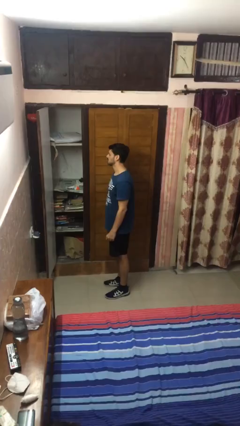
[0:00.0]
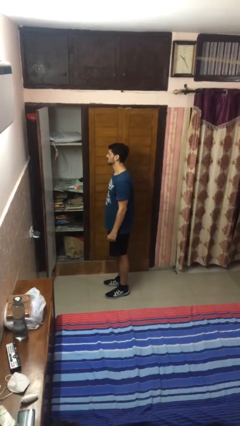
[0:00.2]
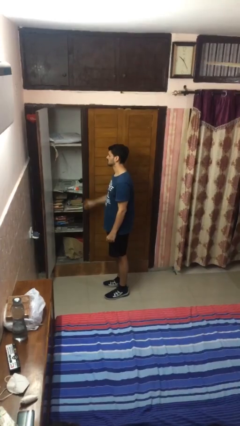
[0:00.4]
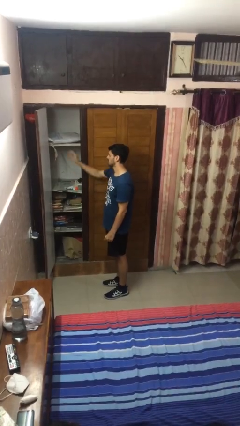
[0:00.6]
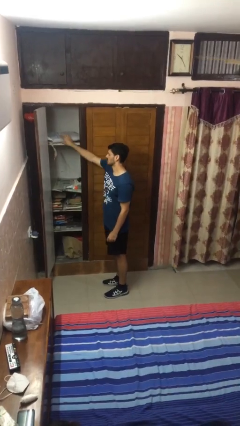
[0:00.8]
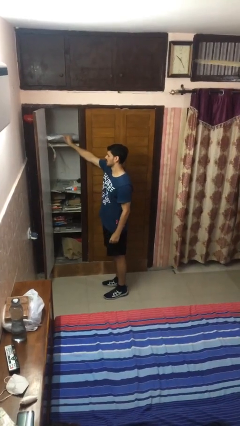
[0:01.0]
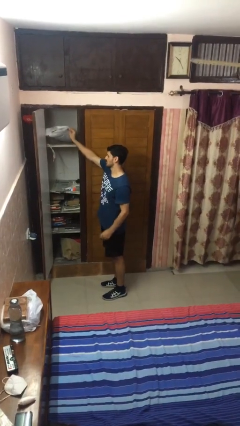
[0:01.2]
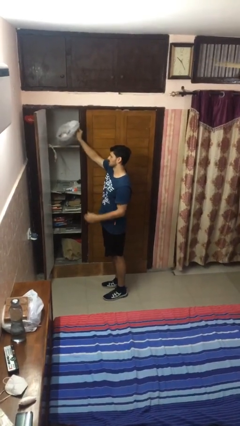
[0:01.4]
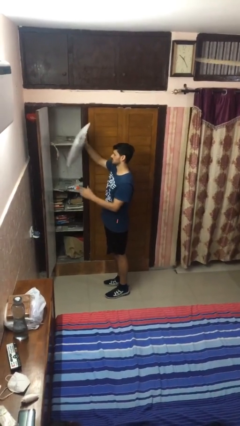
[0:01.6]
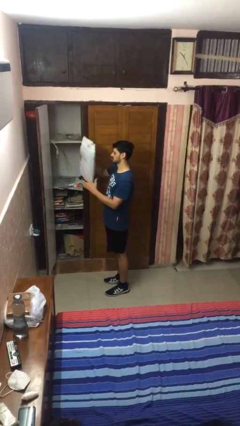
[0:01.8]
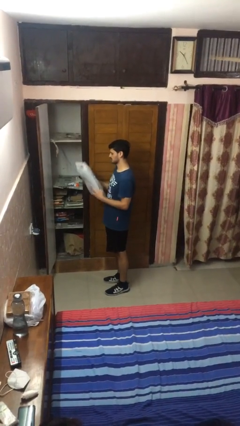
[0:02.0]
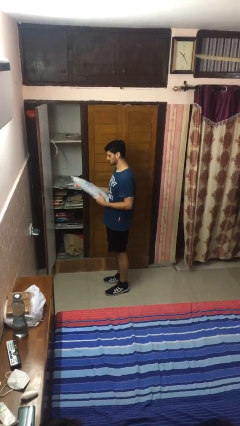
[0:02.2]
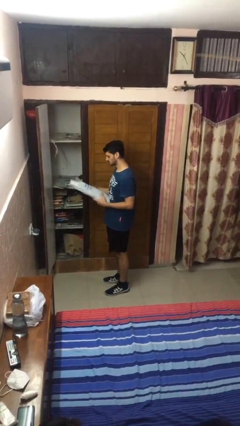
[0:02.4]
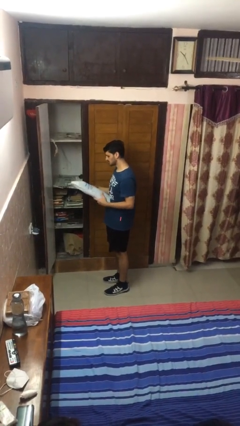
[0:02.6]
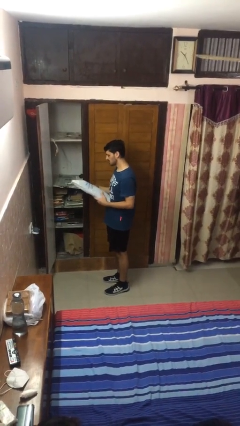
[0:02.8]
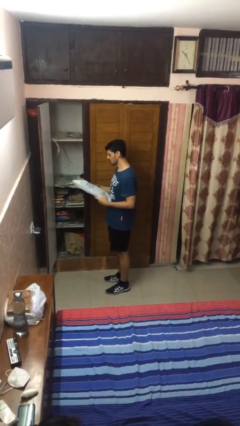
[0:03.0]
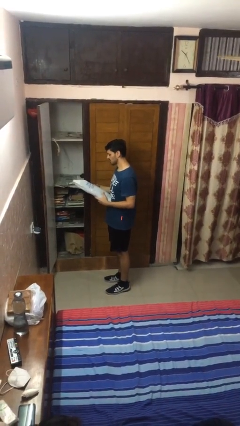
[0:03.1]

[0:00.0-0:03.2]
person picks up object from shelf

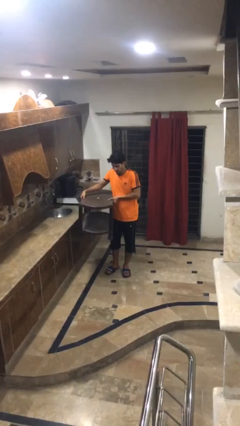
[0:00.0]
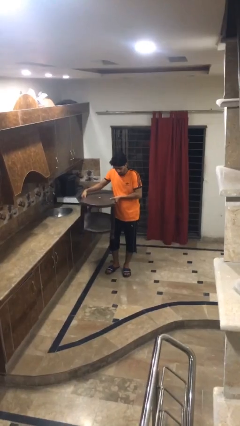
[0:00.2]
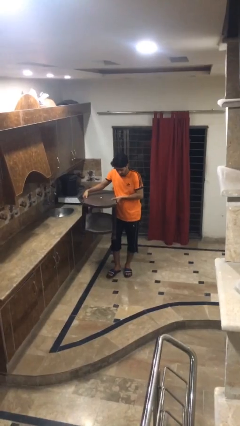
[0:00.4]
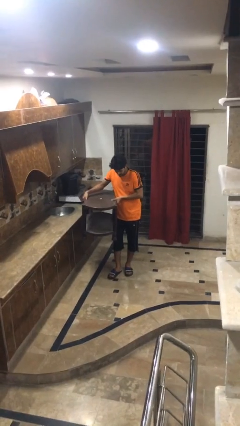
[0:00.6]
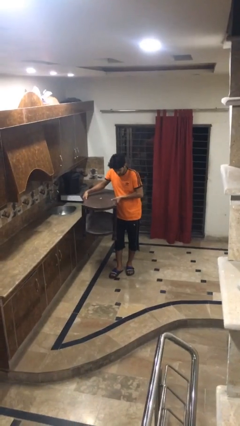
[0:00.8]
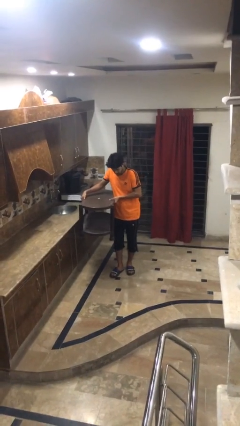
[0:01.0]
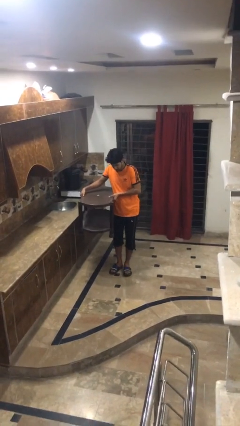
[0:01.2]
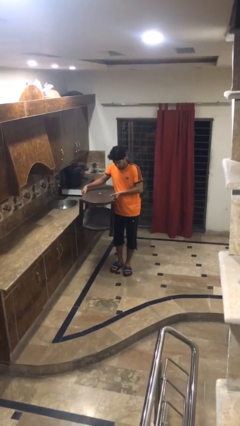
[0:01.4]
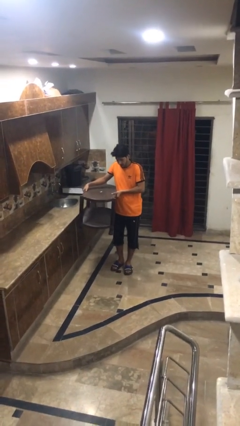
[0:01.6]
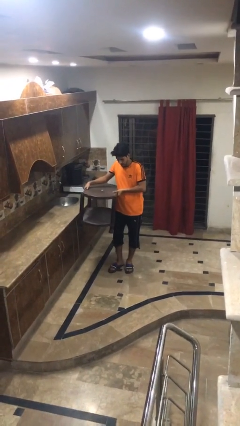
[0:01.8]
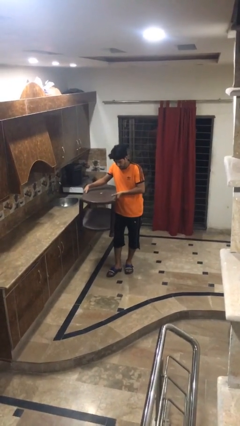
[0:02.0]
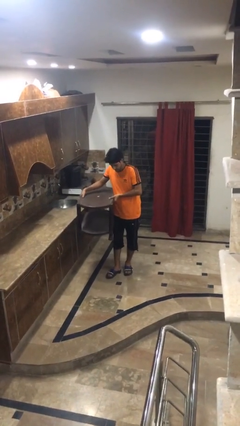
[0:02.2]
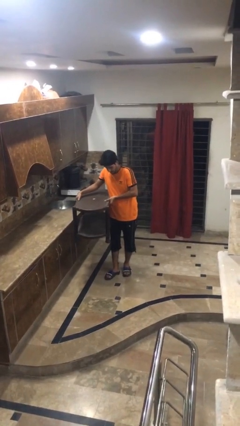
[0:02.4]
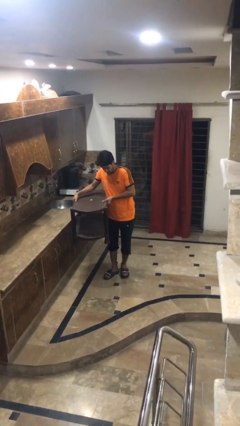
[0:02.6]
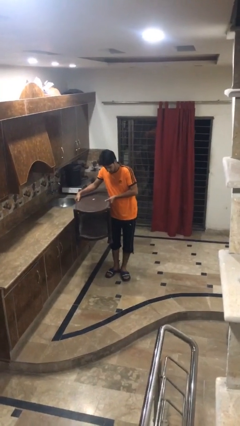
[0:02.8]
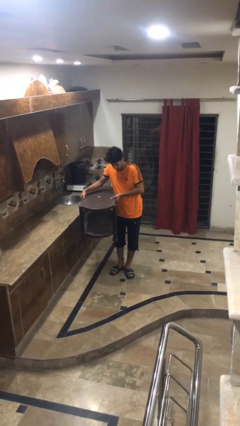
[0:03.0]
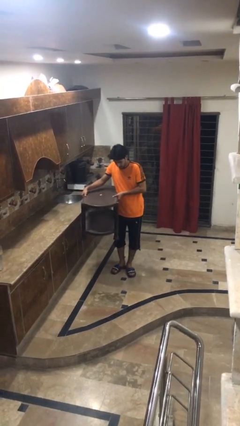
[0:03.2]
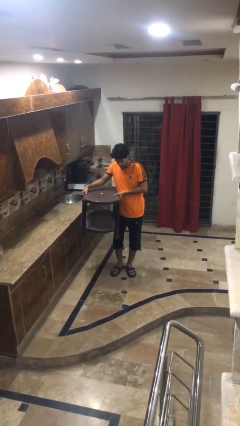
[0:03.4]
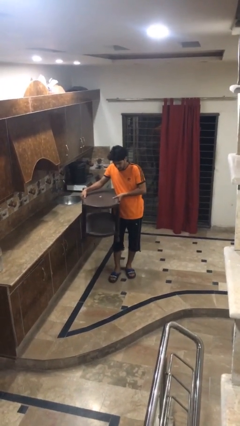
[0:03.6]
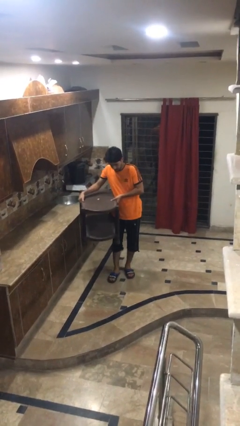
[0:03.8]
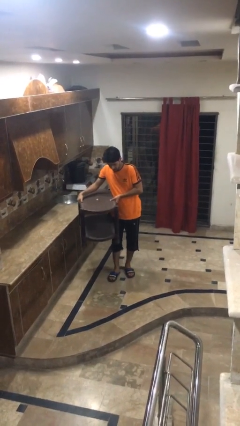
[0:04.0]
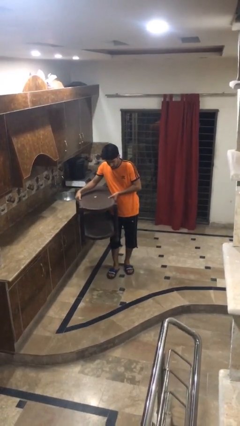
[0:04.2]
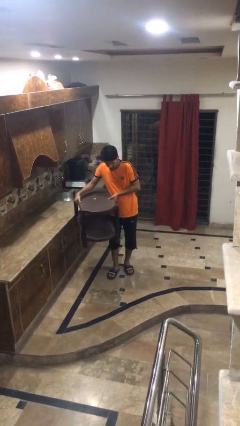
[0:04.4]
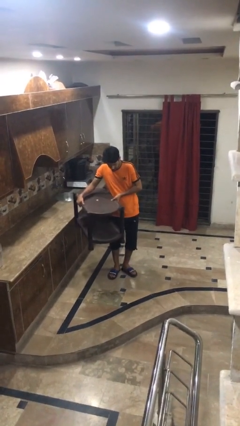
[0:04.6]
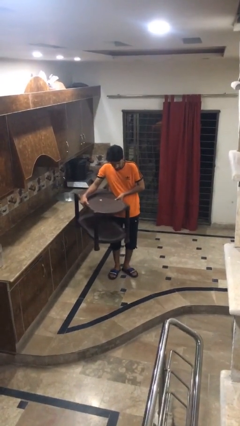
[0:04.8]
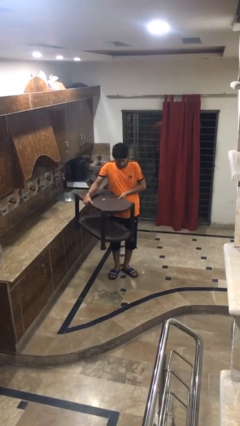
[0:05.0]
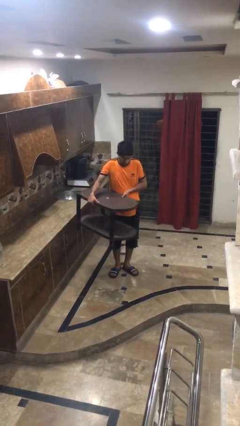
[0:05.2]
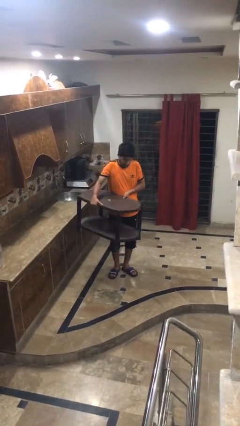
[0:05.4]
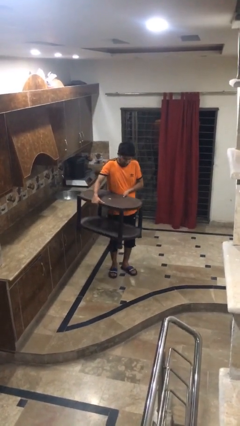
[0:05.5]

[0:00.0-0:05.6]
person carries furniture

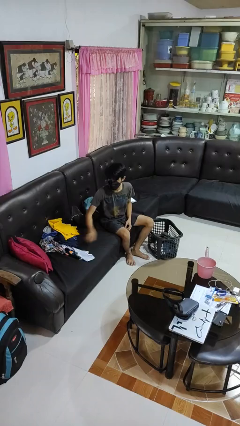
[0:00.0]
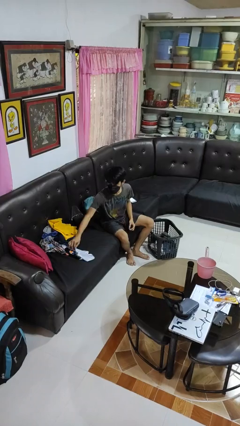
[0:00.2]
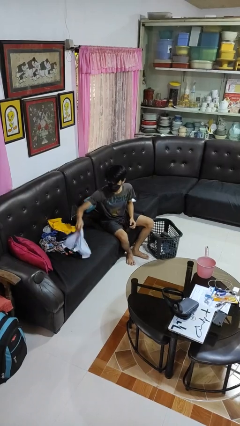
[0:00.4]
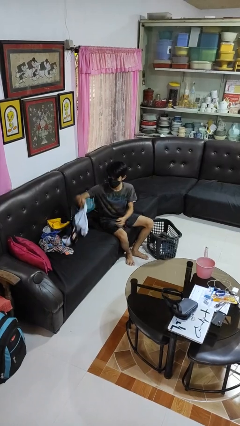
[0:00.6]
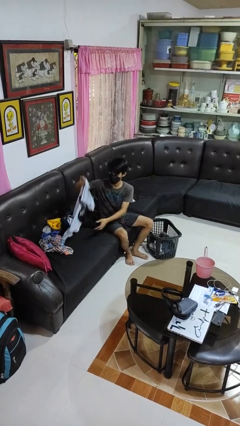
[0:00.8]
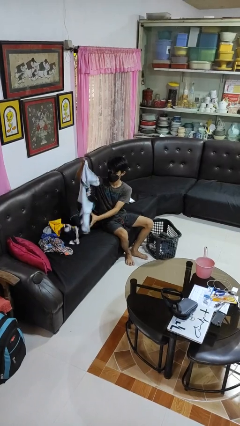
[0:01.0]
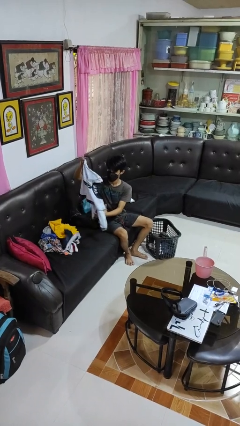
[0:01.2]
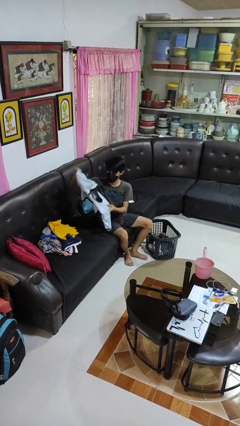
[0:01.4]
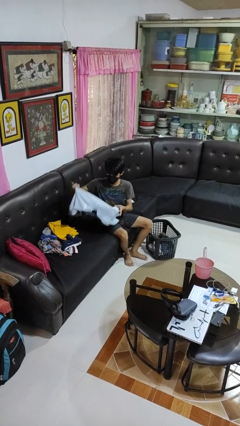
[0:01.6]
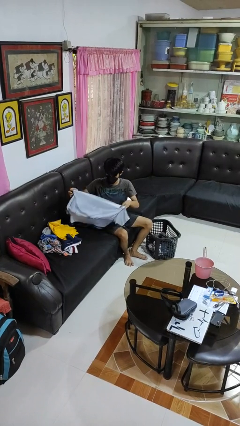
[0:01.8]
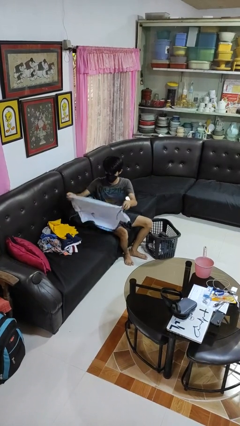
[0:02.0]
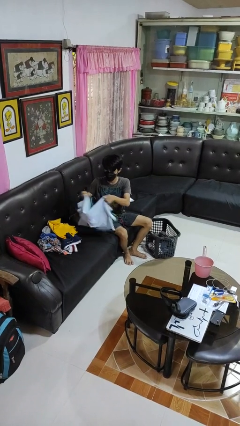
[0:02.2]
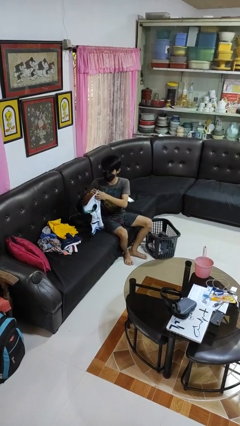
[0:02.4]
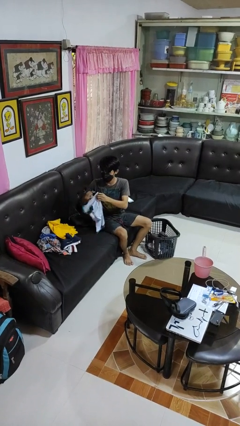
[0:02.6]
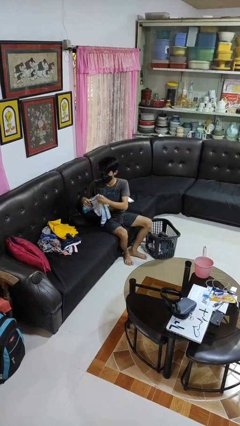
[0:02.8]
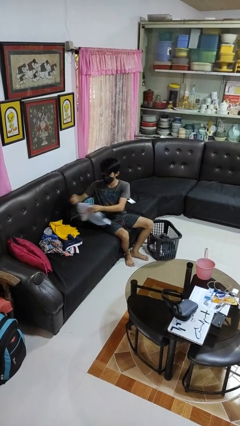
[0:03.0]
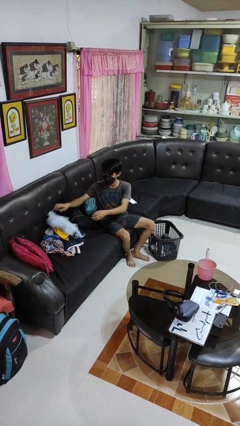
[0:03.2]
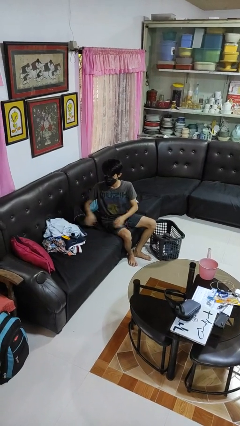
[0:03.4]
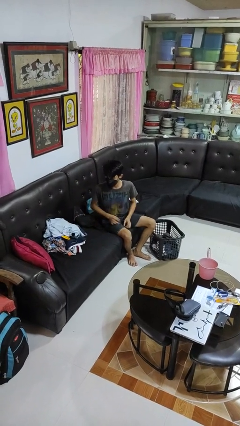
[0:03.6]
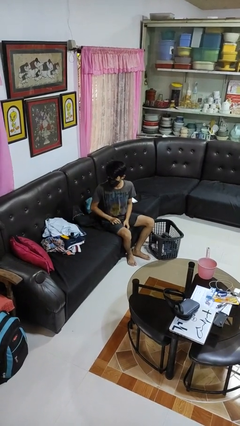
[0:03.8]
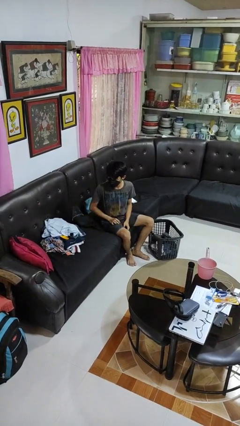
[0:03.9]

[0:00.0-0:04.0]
person folds shirt

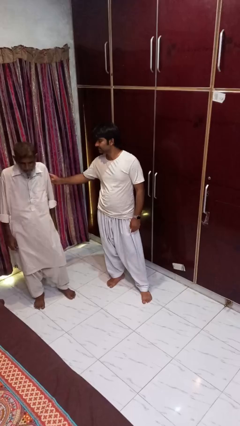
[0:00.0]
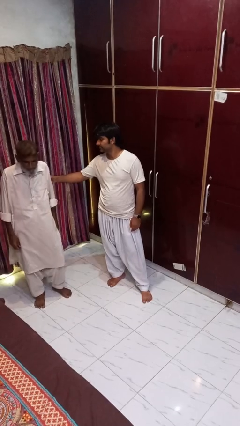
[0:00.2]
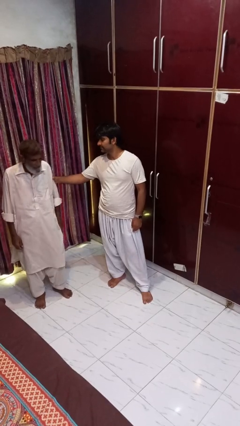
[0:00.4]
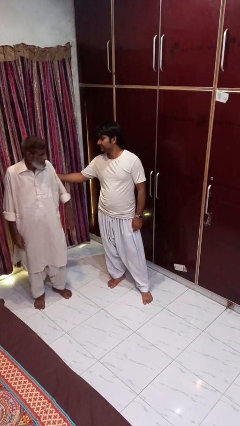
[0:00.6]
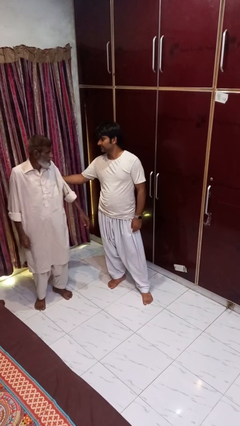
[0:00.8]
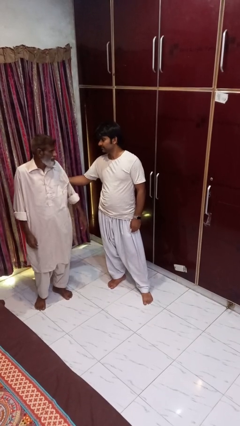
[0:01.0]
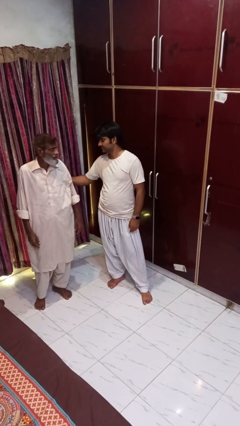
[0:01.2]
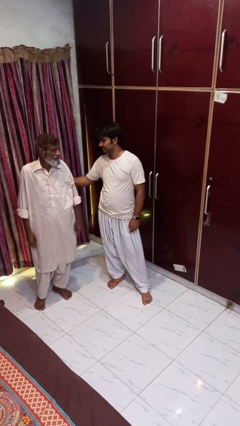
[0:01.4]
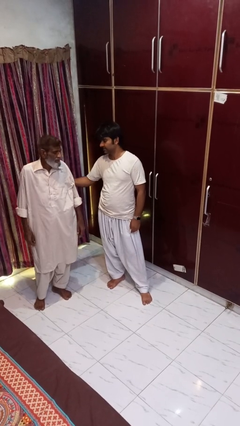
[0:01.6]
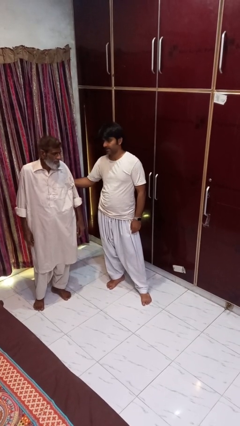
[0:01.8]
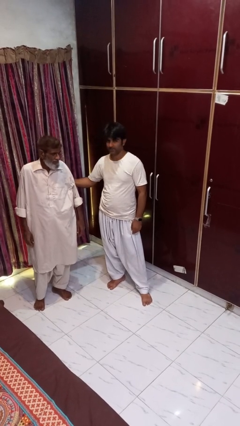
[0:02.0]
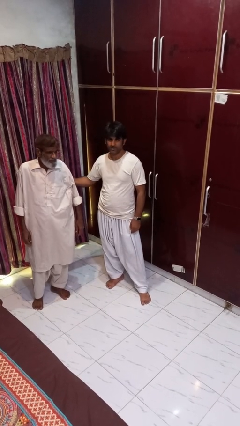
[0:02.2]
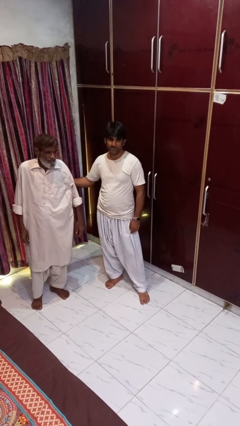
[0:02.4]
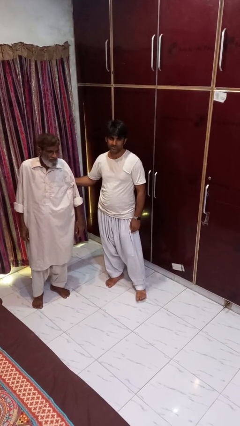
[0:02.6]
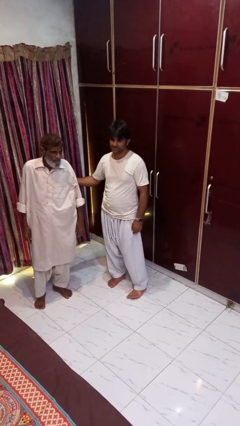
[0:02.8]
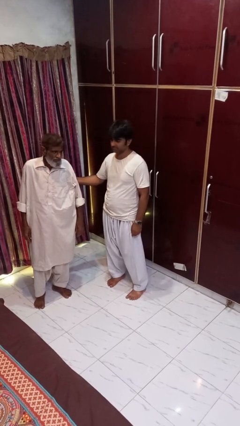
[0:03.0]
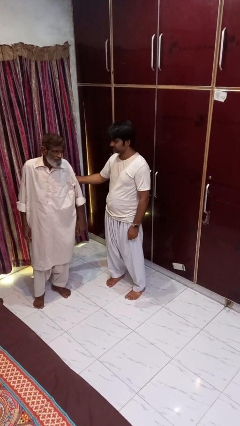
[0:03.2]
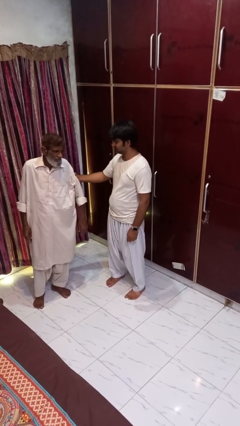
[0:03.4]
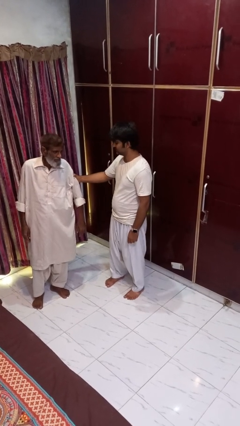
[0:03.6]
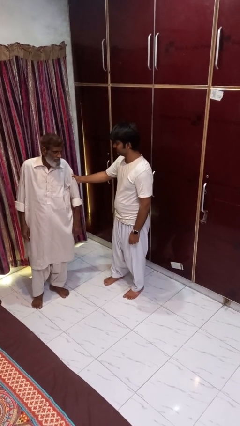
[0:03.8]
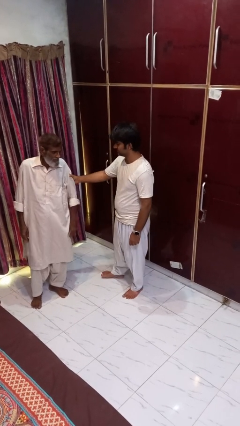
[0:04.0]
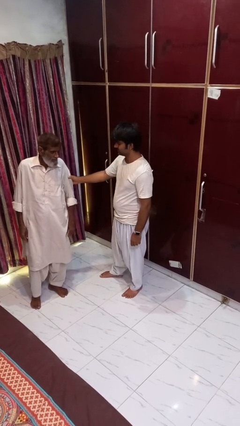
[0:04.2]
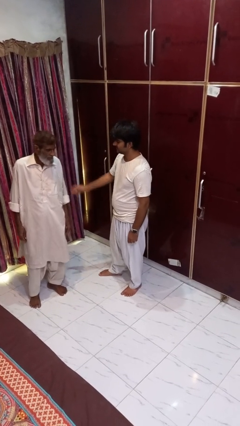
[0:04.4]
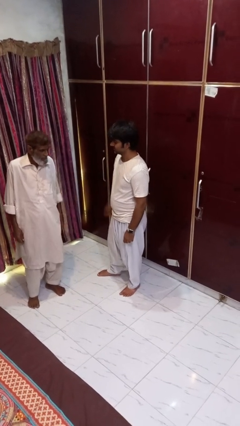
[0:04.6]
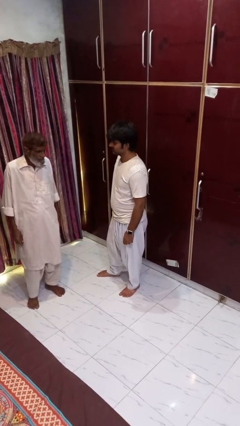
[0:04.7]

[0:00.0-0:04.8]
person grabs person by bicep

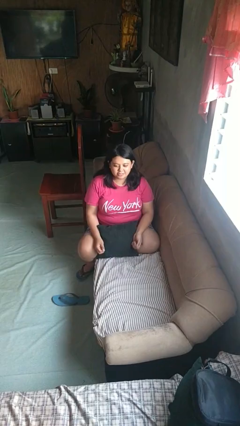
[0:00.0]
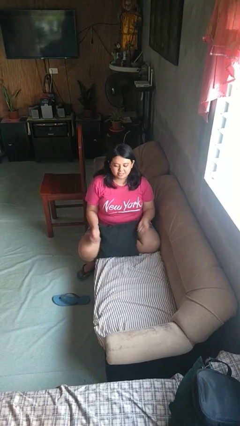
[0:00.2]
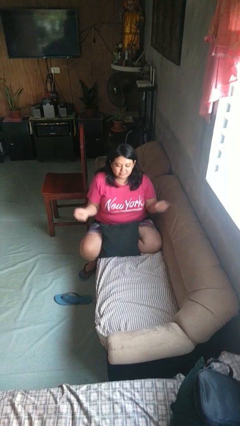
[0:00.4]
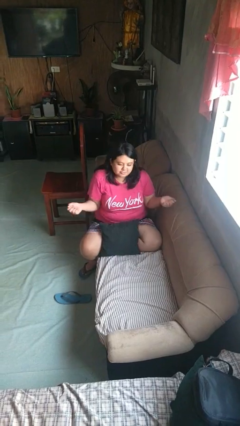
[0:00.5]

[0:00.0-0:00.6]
person shrugs
